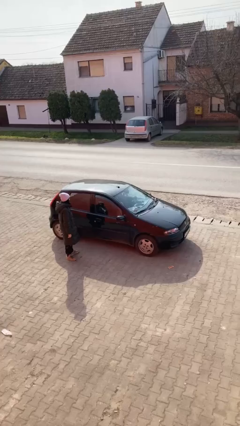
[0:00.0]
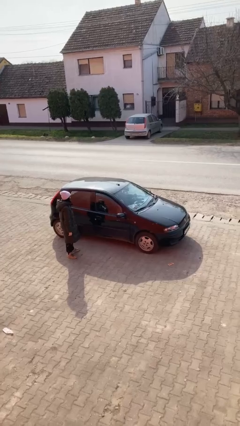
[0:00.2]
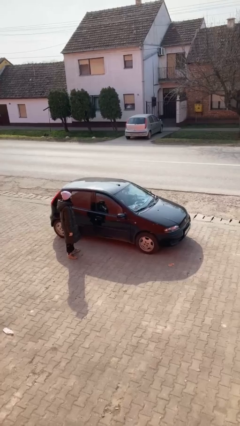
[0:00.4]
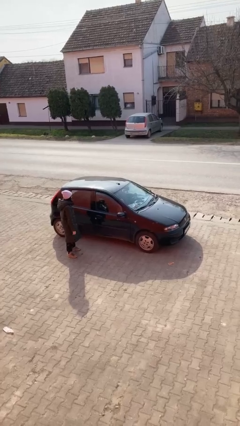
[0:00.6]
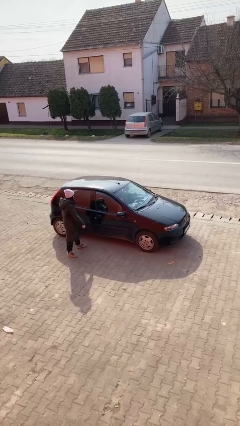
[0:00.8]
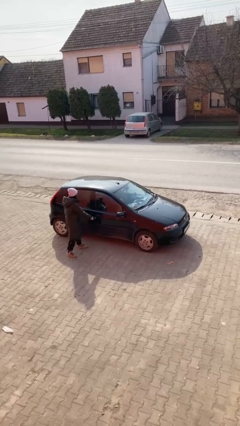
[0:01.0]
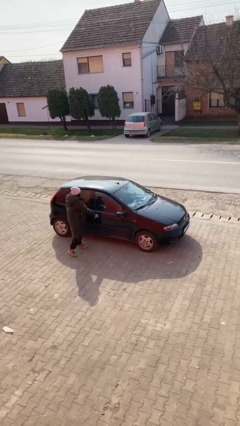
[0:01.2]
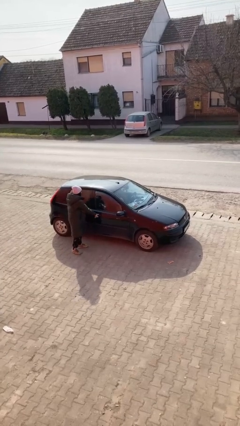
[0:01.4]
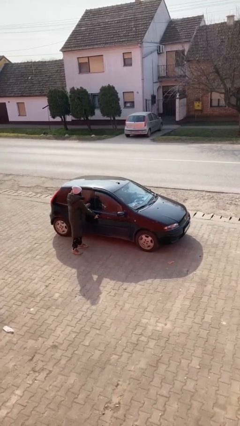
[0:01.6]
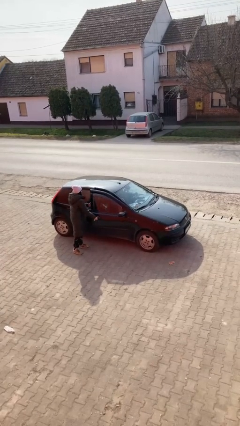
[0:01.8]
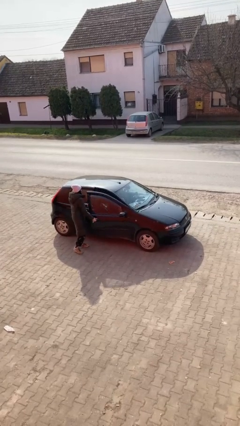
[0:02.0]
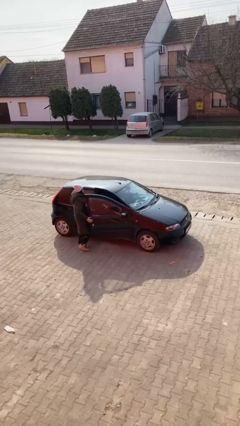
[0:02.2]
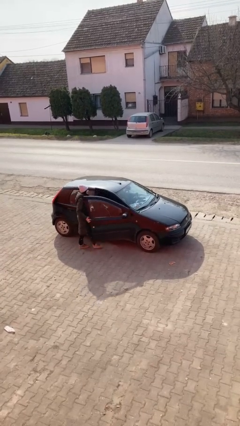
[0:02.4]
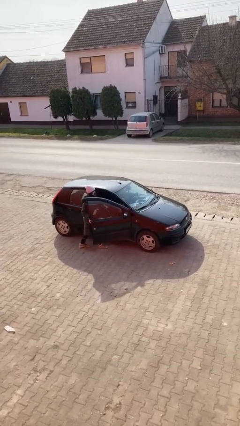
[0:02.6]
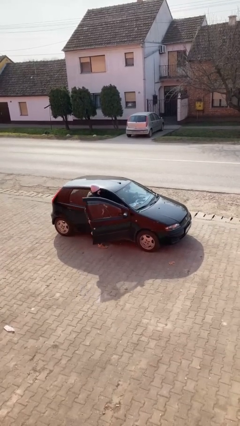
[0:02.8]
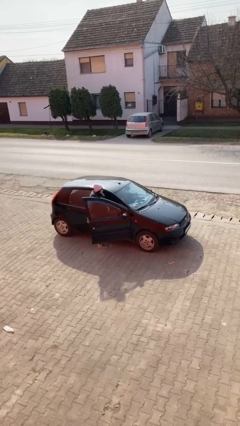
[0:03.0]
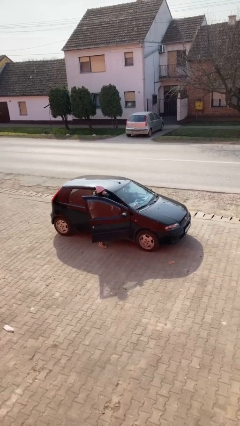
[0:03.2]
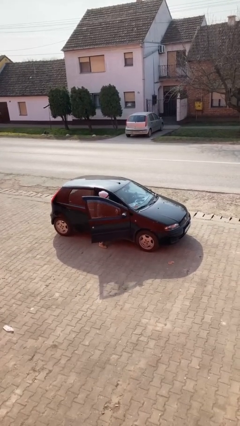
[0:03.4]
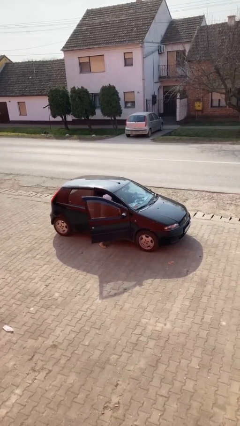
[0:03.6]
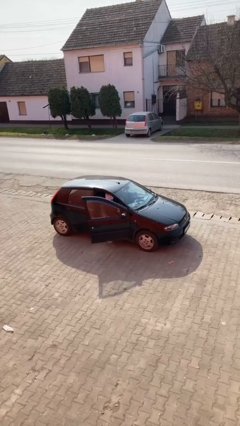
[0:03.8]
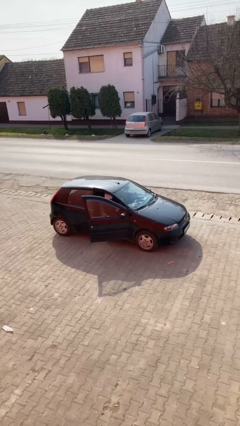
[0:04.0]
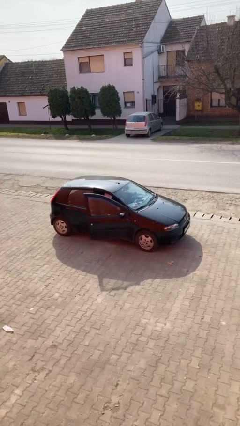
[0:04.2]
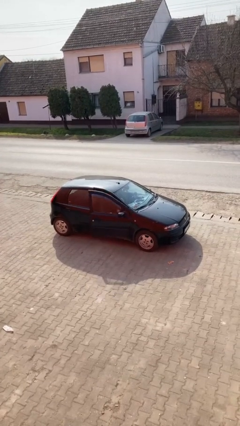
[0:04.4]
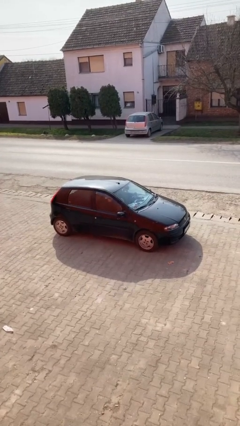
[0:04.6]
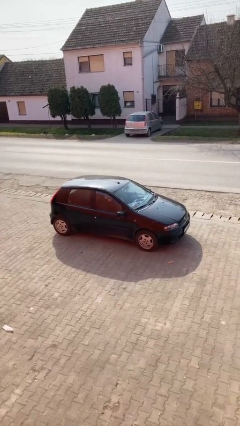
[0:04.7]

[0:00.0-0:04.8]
car picks up person

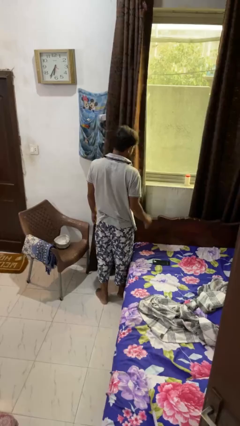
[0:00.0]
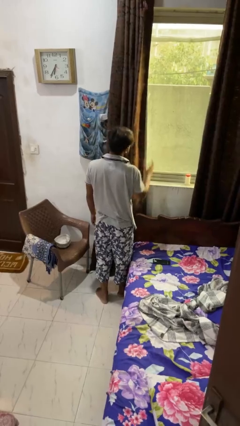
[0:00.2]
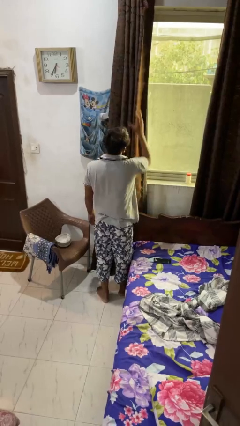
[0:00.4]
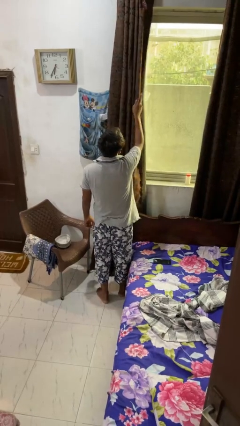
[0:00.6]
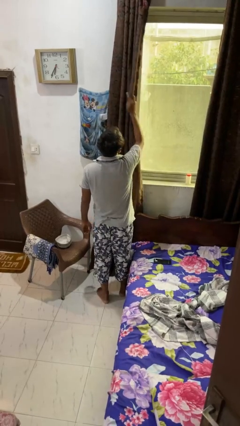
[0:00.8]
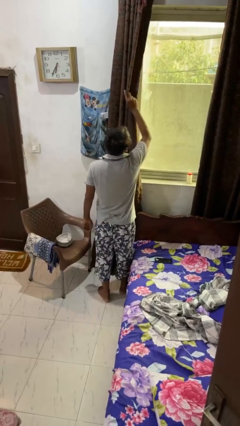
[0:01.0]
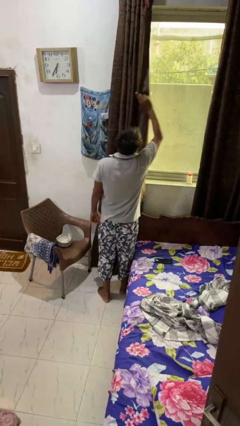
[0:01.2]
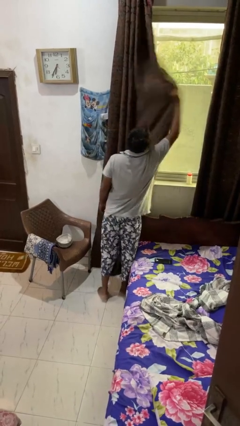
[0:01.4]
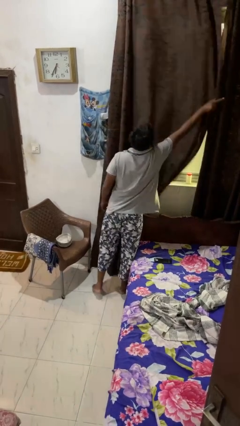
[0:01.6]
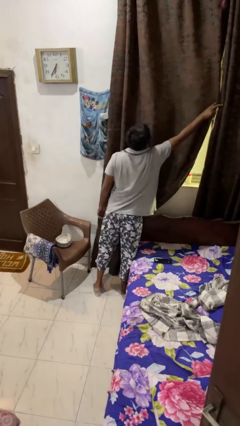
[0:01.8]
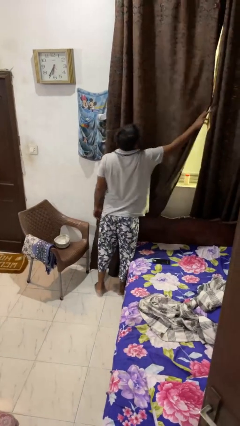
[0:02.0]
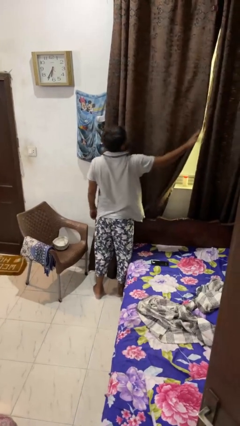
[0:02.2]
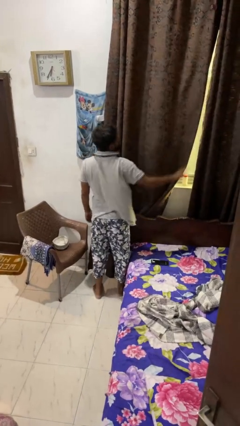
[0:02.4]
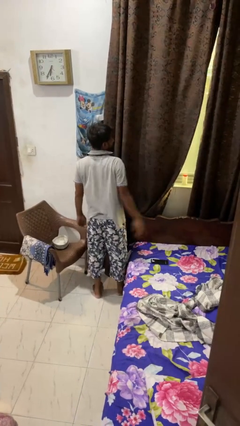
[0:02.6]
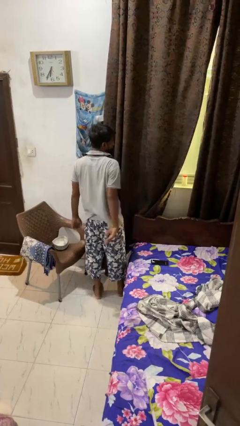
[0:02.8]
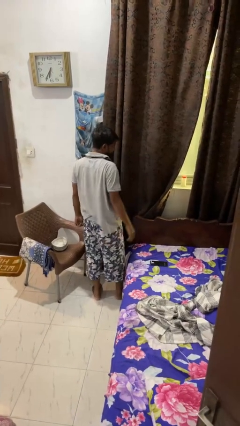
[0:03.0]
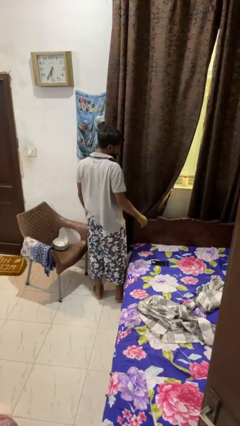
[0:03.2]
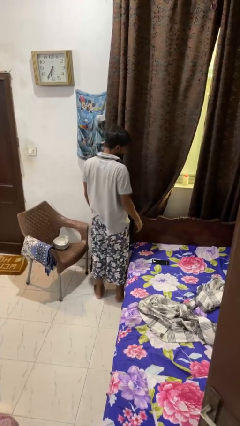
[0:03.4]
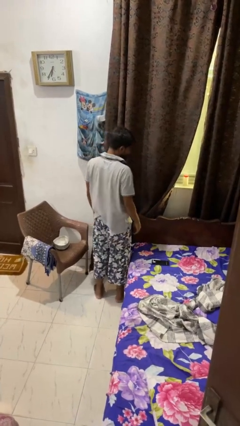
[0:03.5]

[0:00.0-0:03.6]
person closes curtains

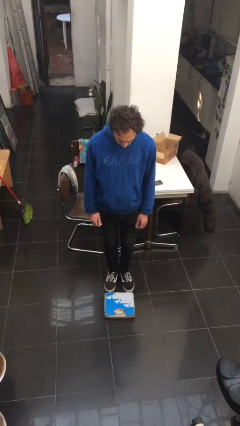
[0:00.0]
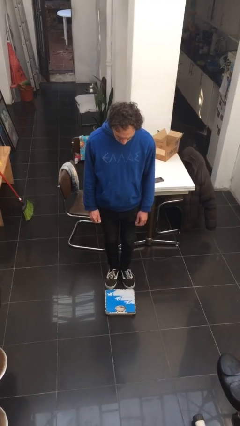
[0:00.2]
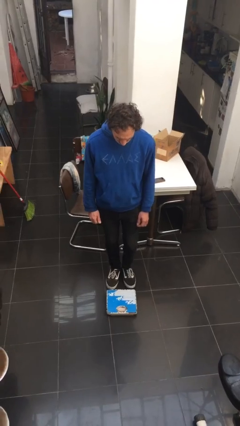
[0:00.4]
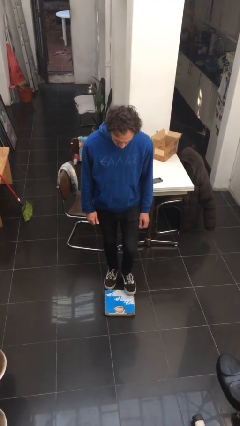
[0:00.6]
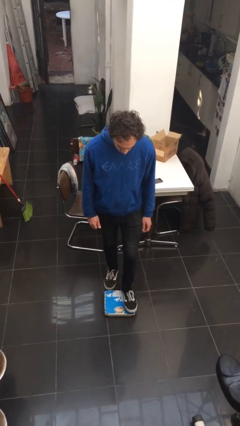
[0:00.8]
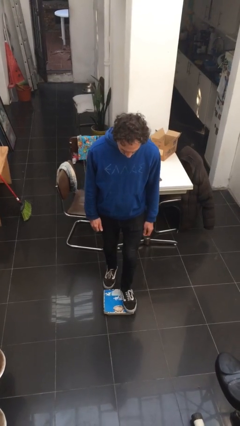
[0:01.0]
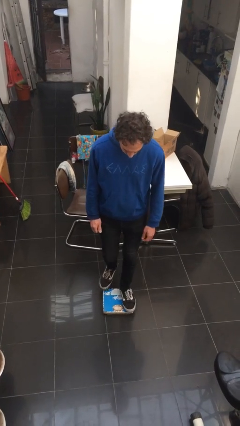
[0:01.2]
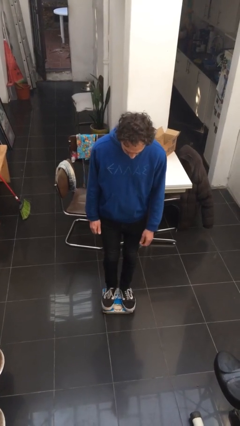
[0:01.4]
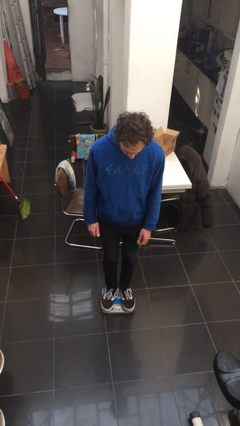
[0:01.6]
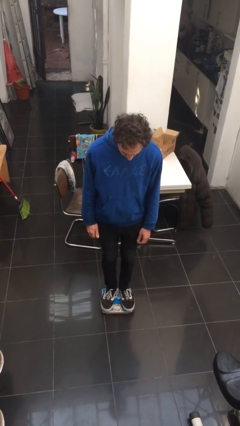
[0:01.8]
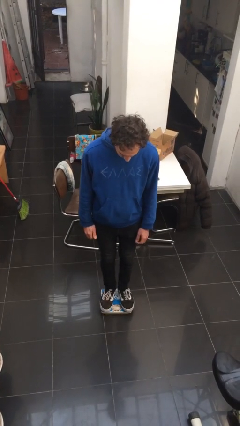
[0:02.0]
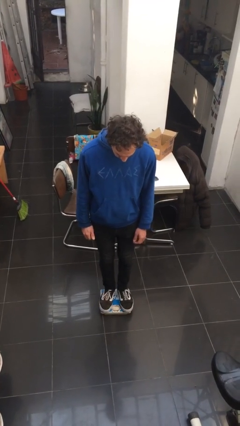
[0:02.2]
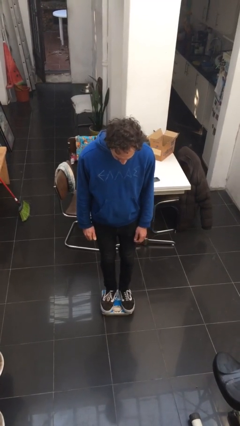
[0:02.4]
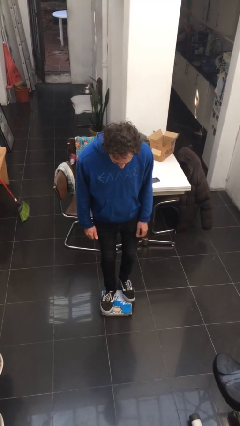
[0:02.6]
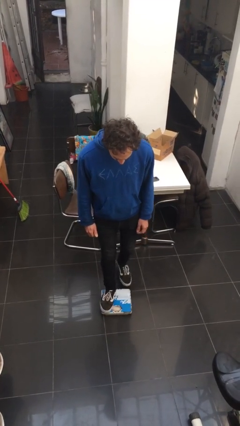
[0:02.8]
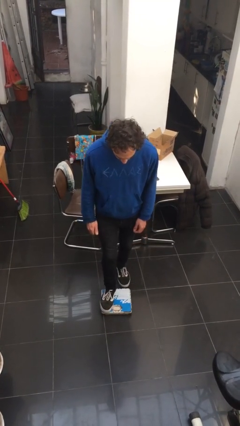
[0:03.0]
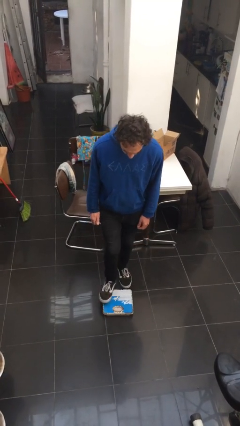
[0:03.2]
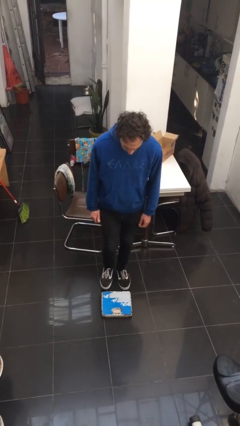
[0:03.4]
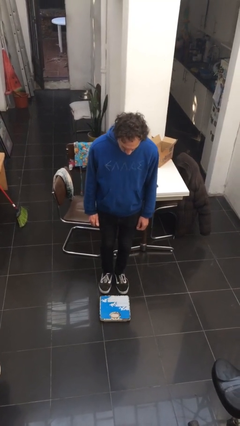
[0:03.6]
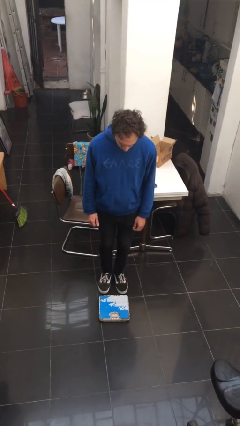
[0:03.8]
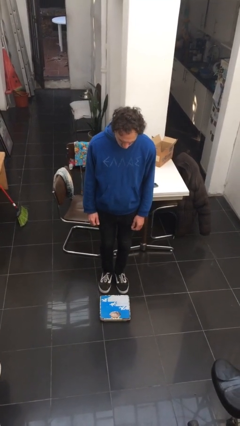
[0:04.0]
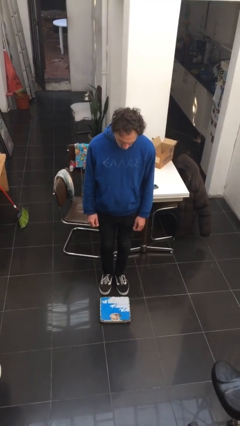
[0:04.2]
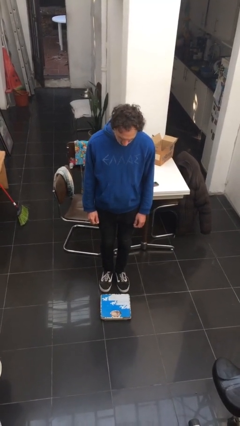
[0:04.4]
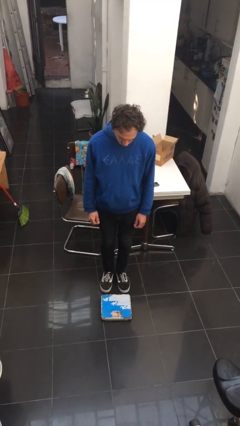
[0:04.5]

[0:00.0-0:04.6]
person uses bodyweight scale

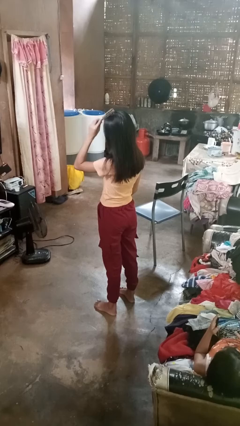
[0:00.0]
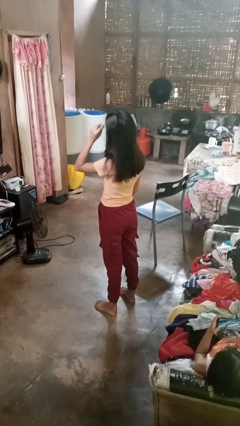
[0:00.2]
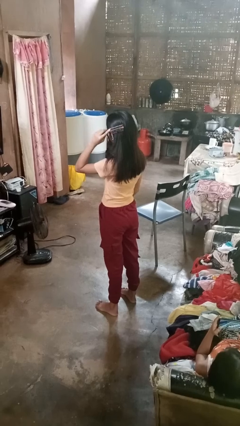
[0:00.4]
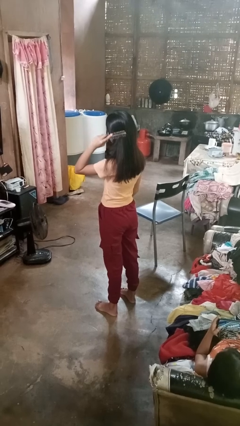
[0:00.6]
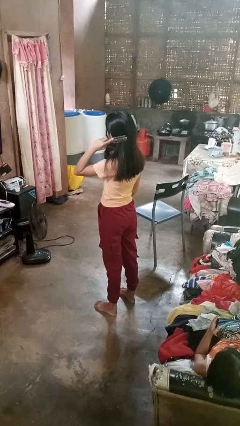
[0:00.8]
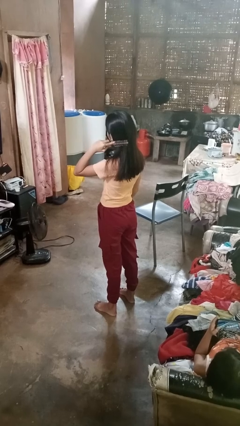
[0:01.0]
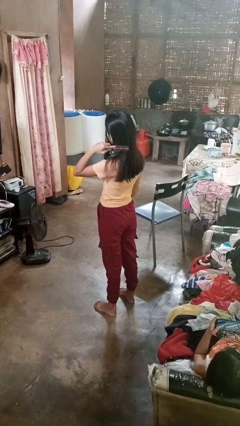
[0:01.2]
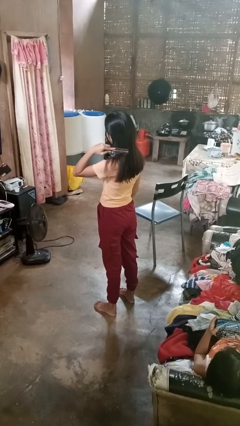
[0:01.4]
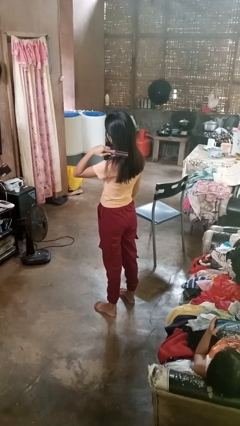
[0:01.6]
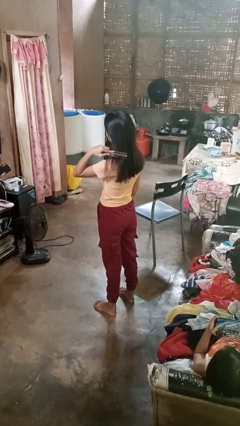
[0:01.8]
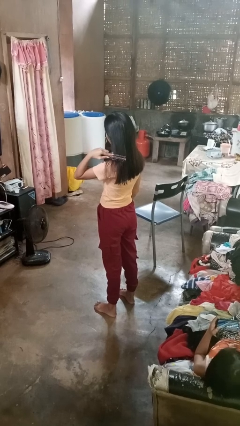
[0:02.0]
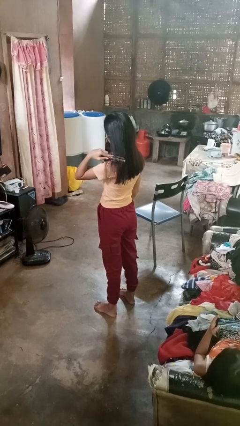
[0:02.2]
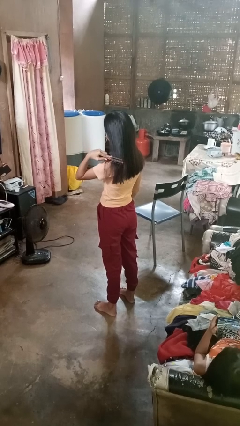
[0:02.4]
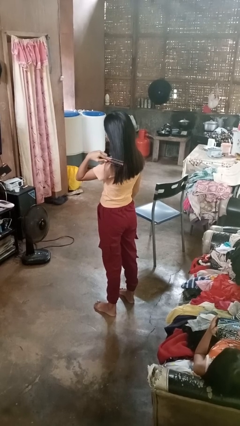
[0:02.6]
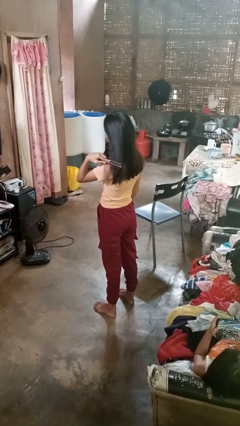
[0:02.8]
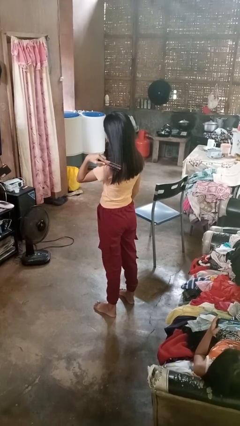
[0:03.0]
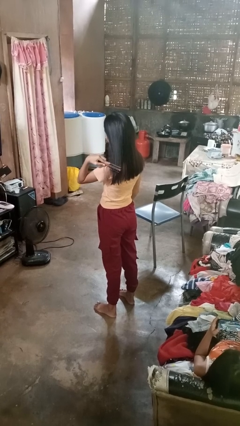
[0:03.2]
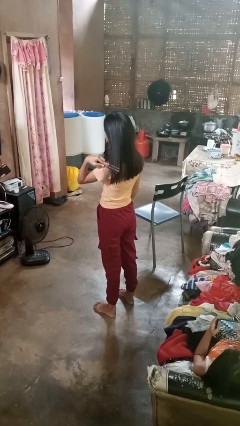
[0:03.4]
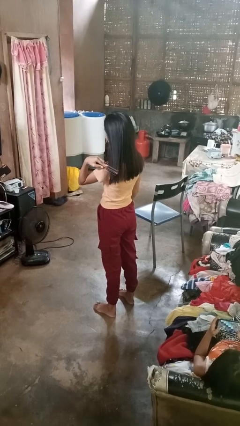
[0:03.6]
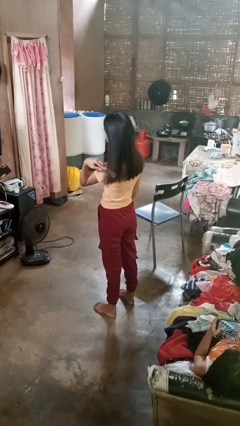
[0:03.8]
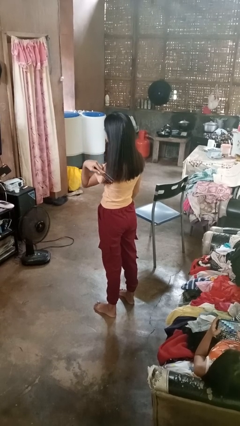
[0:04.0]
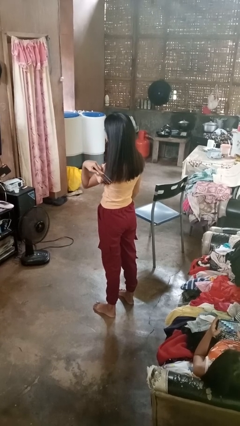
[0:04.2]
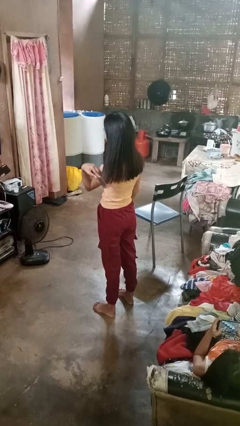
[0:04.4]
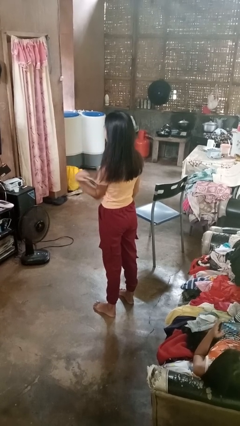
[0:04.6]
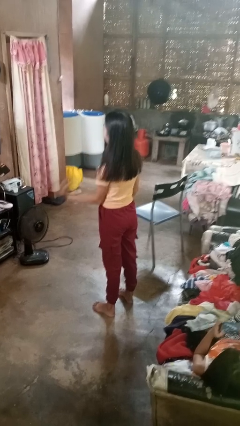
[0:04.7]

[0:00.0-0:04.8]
person brushes hair
